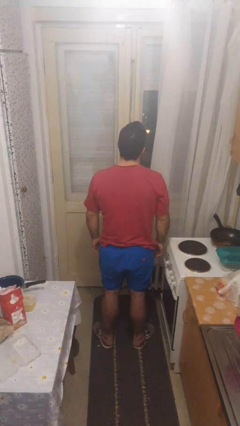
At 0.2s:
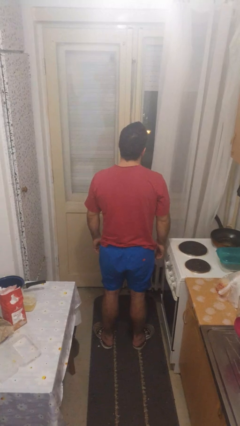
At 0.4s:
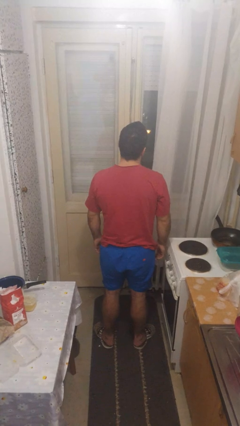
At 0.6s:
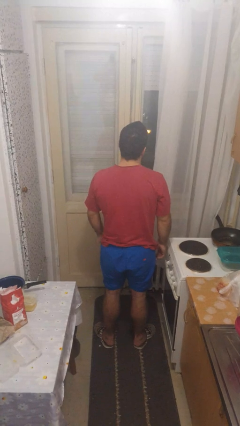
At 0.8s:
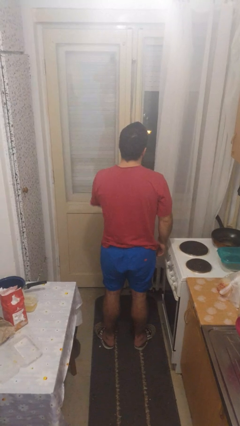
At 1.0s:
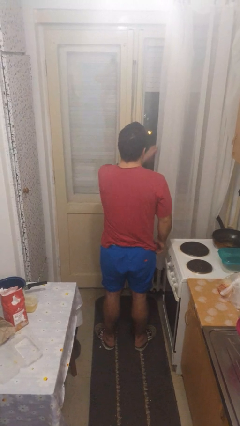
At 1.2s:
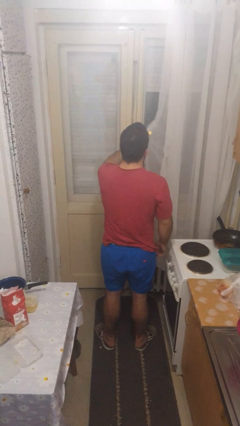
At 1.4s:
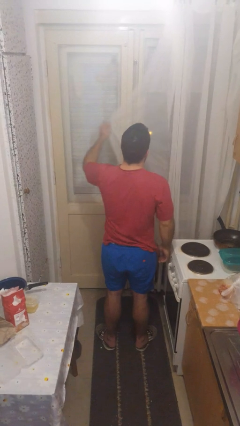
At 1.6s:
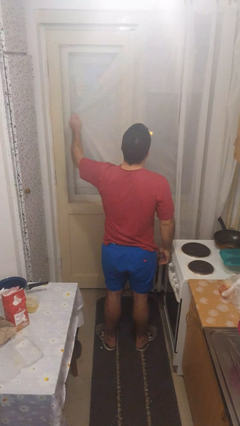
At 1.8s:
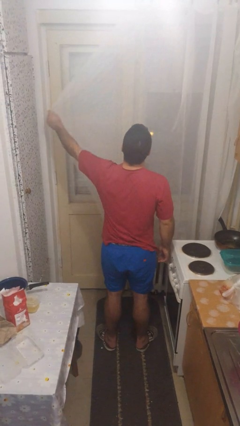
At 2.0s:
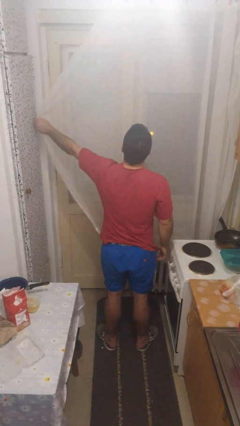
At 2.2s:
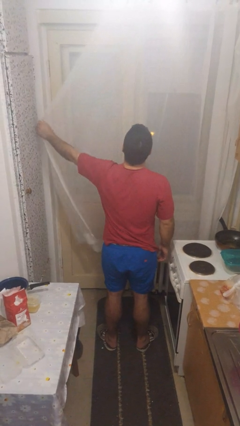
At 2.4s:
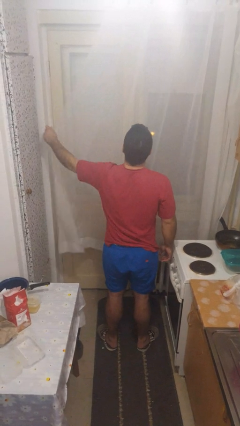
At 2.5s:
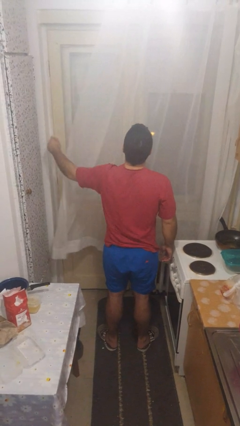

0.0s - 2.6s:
person closes curtains

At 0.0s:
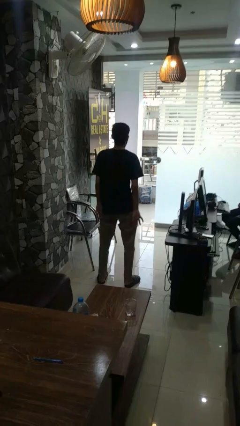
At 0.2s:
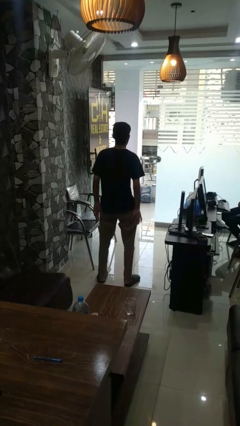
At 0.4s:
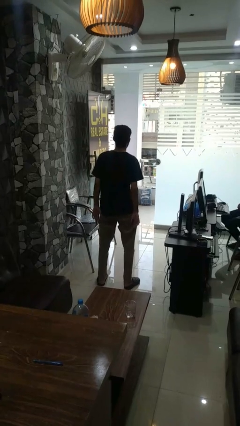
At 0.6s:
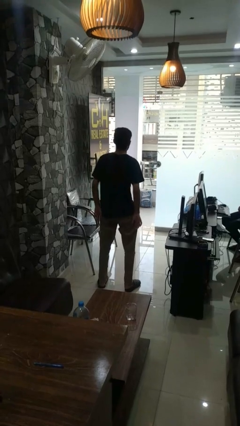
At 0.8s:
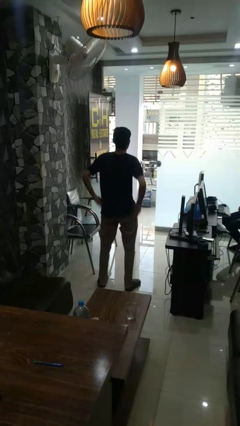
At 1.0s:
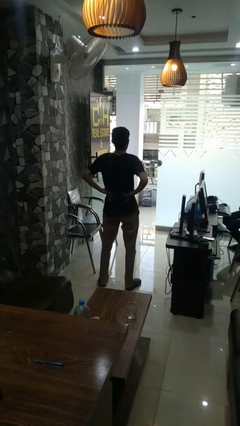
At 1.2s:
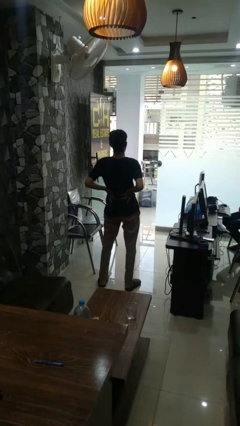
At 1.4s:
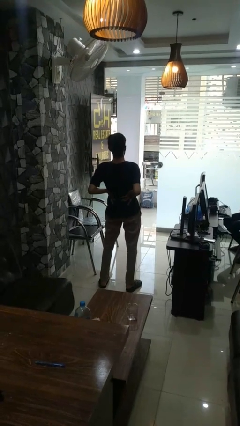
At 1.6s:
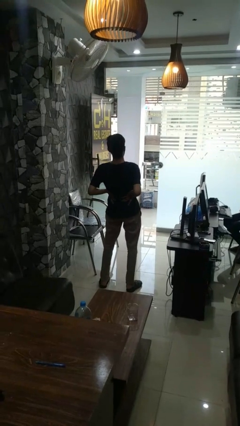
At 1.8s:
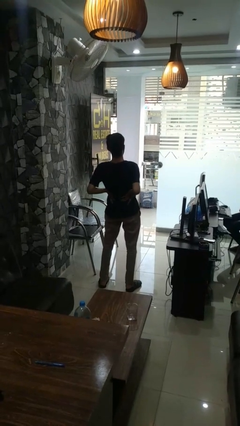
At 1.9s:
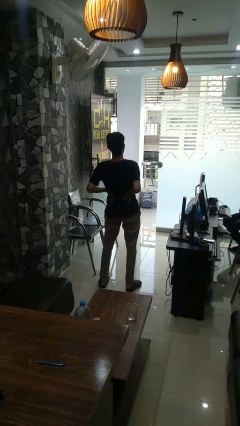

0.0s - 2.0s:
person stretches back

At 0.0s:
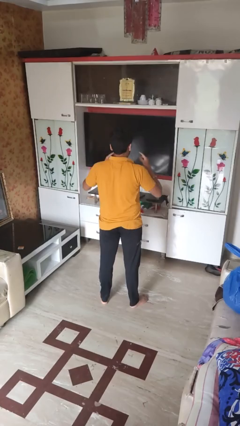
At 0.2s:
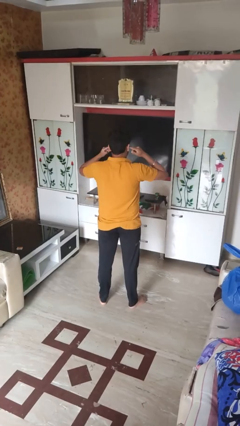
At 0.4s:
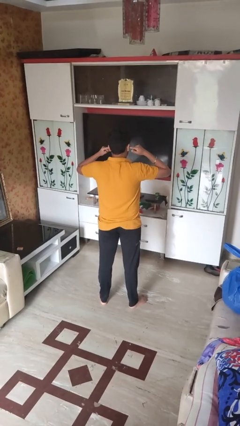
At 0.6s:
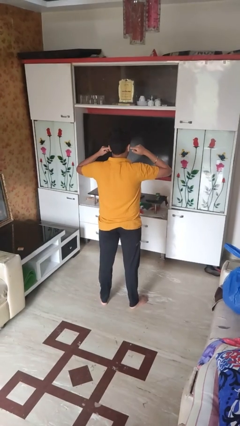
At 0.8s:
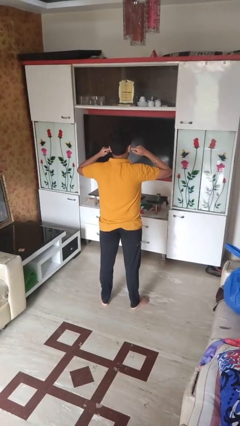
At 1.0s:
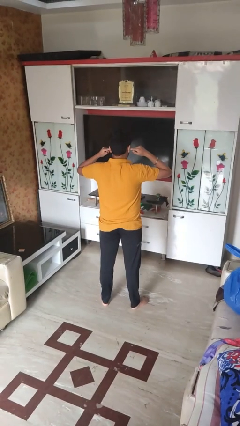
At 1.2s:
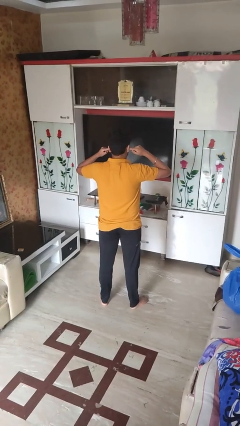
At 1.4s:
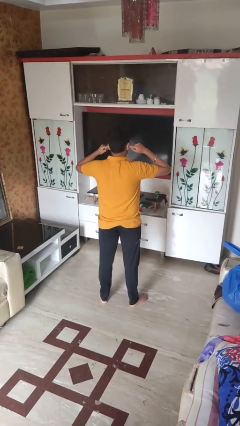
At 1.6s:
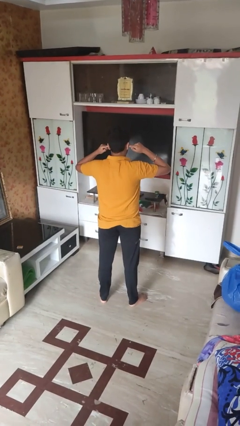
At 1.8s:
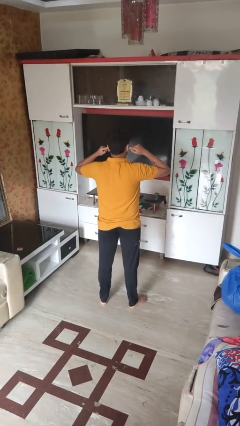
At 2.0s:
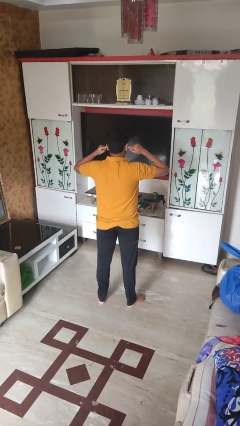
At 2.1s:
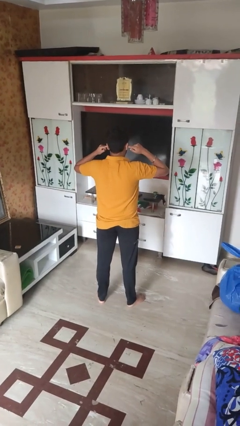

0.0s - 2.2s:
person puts fingers in ear

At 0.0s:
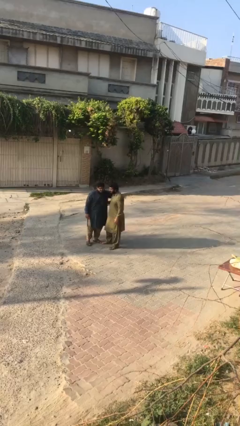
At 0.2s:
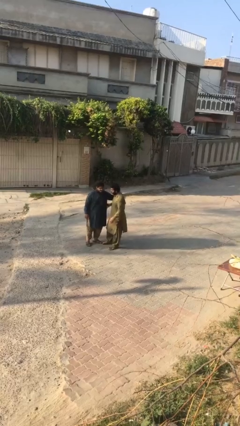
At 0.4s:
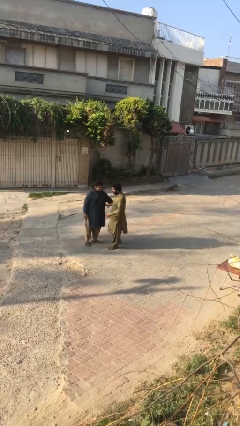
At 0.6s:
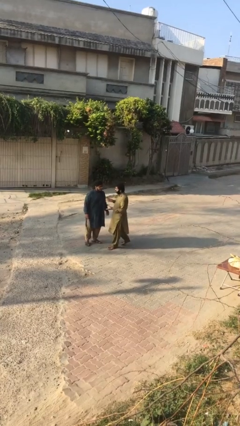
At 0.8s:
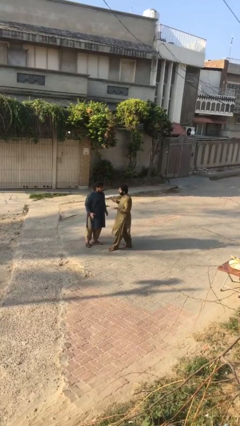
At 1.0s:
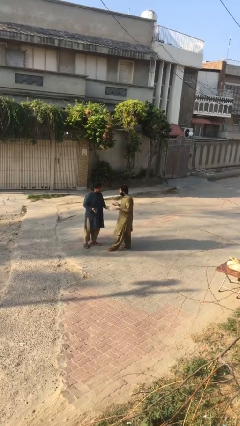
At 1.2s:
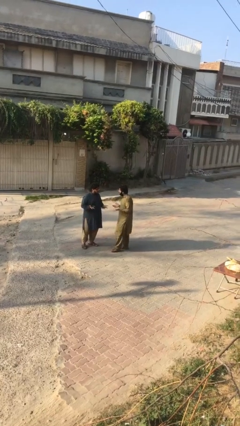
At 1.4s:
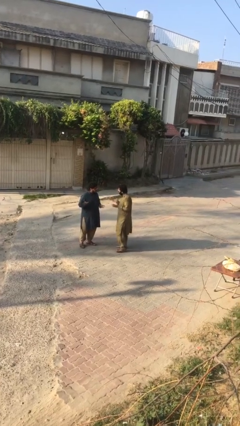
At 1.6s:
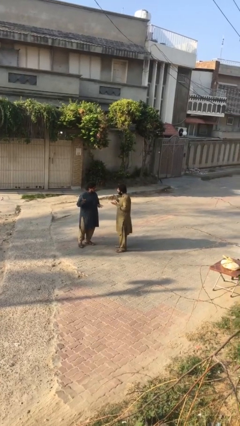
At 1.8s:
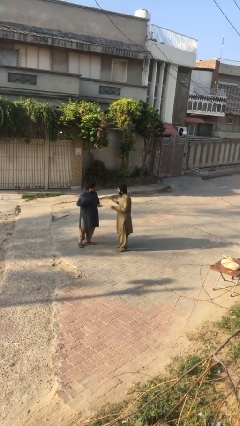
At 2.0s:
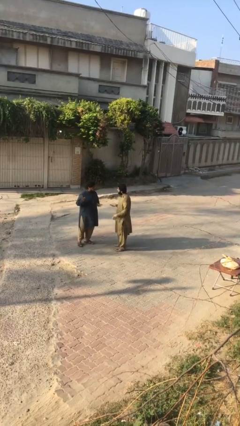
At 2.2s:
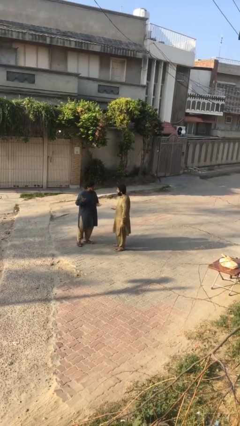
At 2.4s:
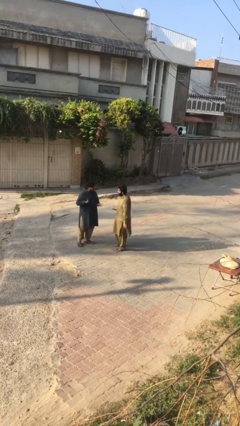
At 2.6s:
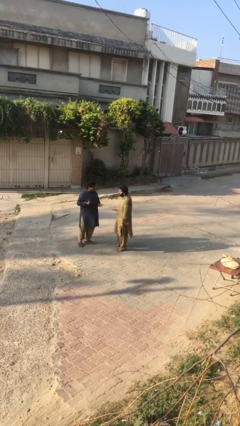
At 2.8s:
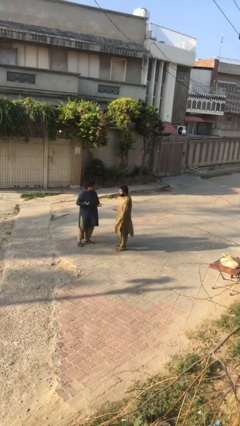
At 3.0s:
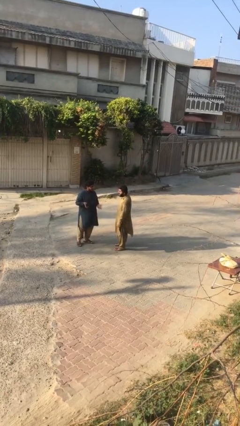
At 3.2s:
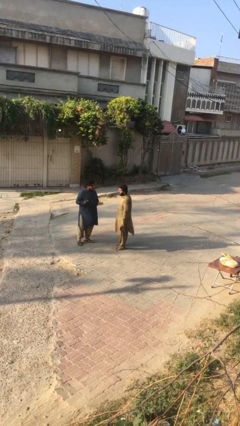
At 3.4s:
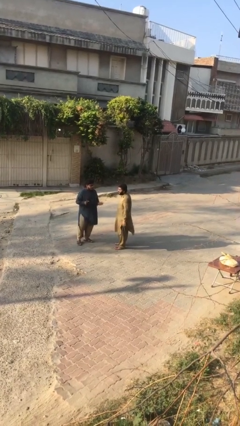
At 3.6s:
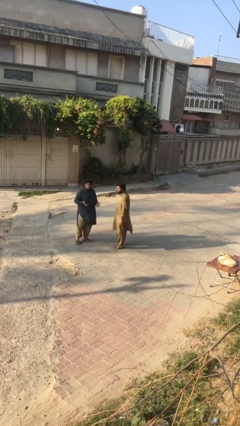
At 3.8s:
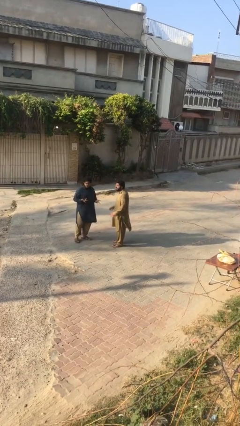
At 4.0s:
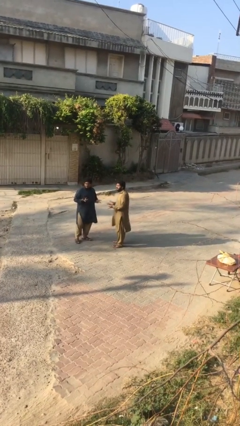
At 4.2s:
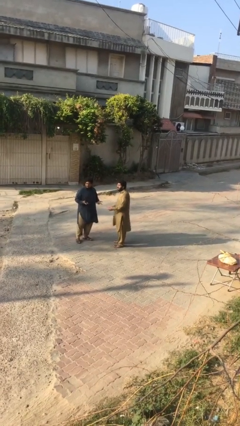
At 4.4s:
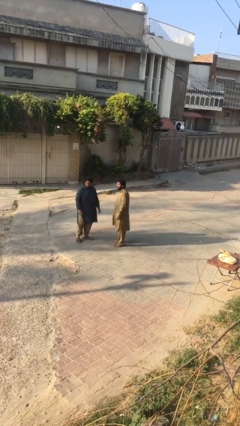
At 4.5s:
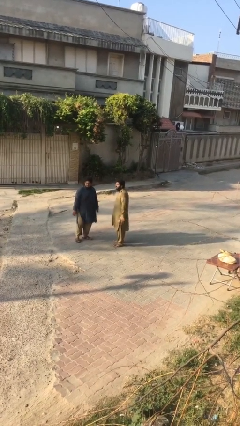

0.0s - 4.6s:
person talks to person

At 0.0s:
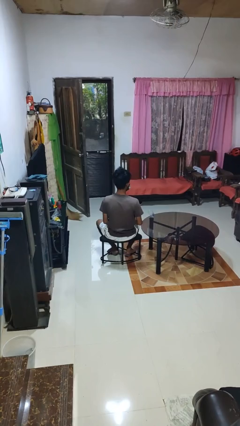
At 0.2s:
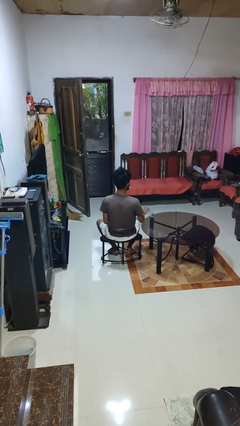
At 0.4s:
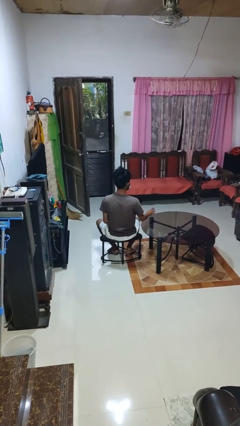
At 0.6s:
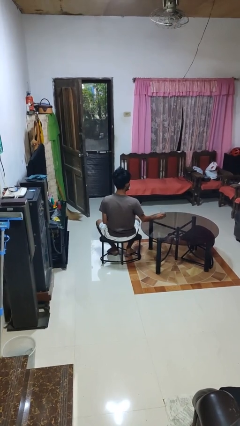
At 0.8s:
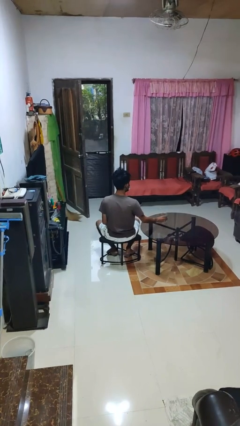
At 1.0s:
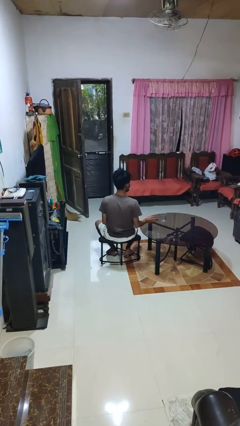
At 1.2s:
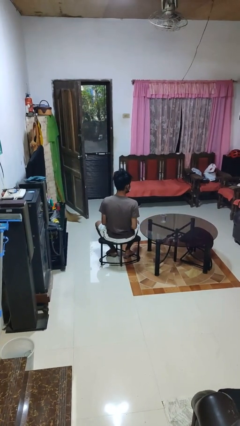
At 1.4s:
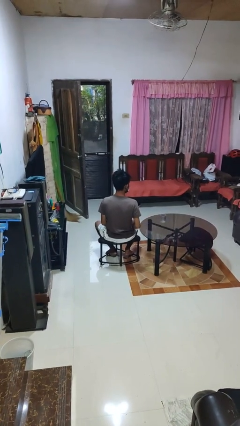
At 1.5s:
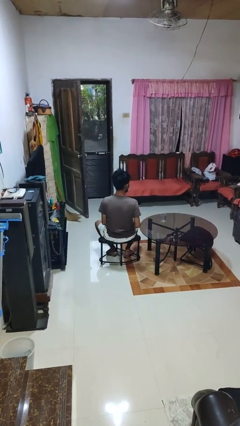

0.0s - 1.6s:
person sets upright glass

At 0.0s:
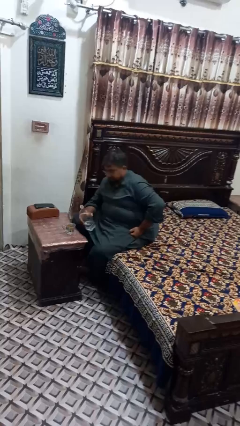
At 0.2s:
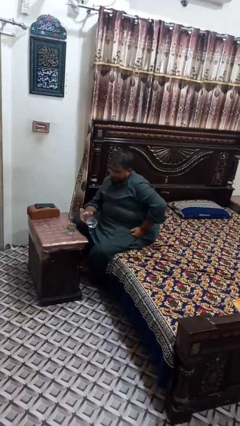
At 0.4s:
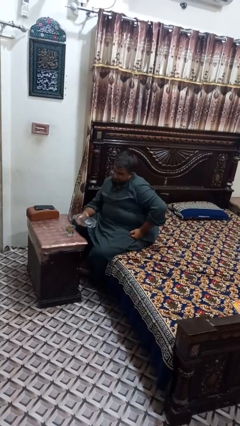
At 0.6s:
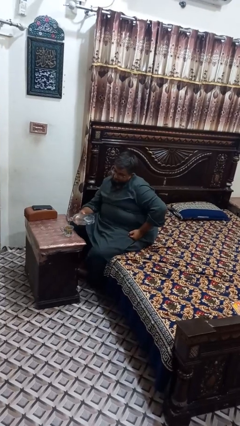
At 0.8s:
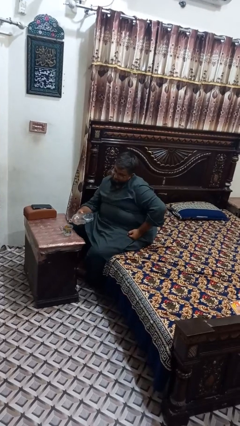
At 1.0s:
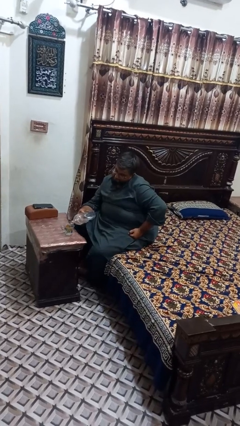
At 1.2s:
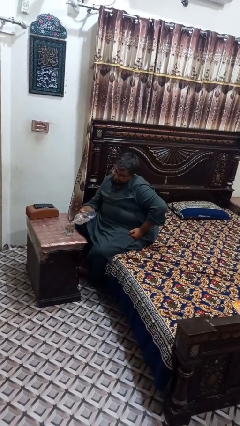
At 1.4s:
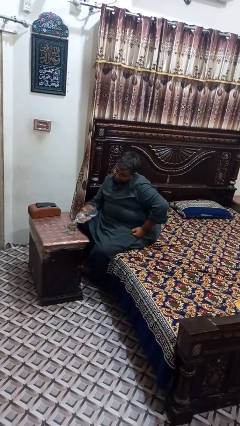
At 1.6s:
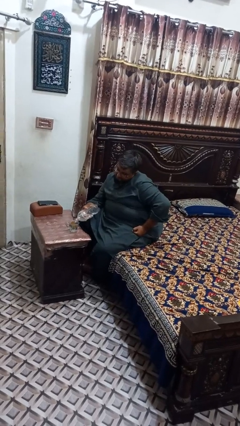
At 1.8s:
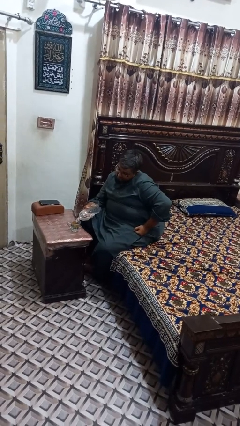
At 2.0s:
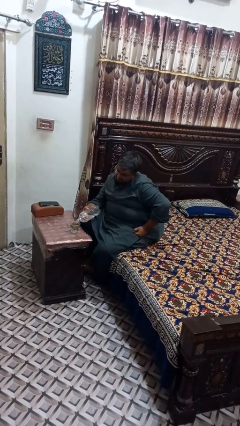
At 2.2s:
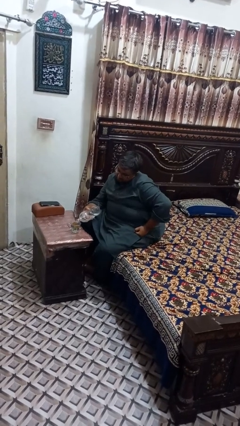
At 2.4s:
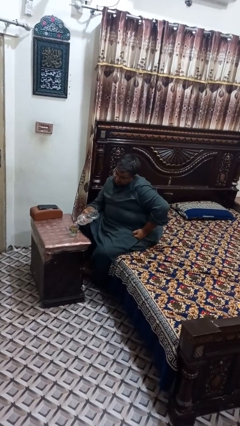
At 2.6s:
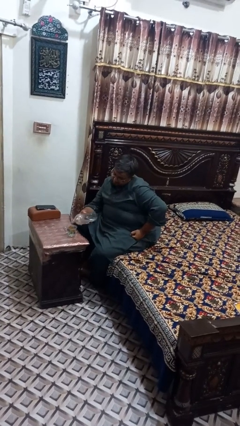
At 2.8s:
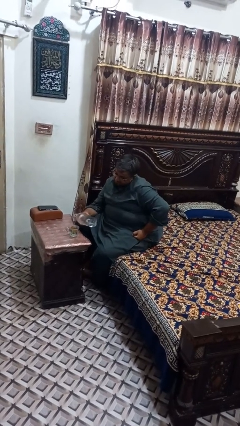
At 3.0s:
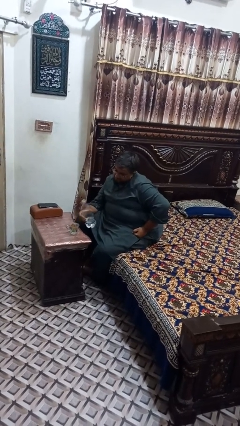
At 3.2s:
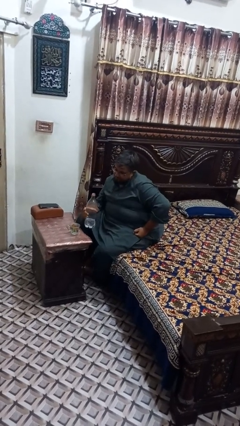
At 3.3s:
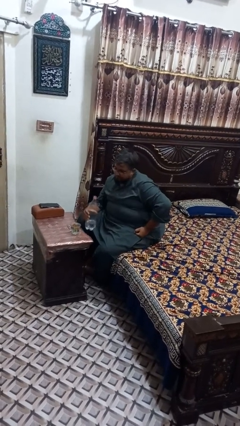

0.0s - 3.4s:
person pours liquid into cup

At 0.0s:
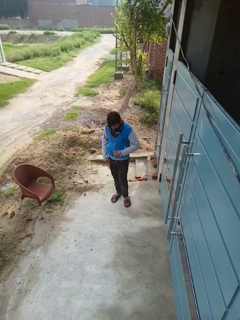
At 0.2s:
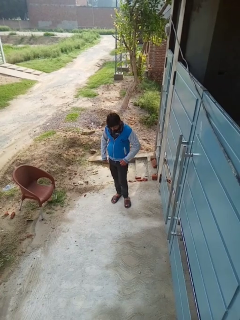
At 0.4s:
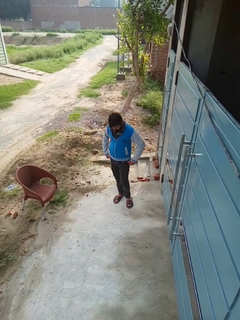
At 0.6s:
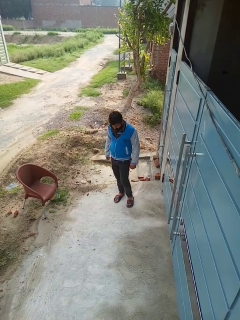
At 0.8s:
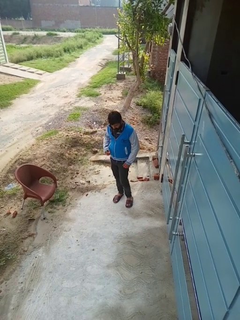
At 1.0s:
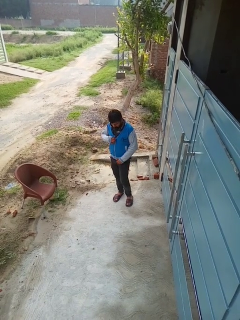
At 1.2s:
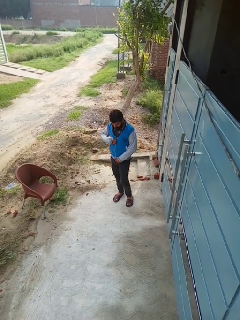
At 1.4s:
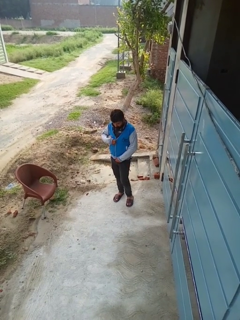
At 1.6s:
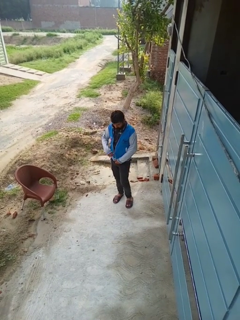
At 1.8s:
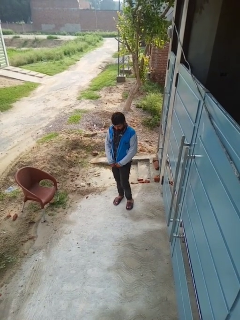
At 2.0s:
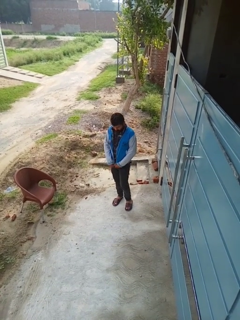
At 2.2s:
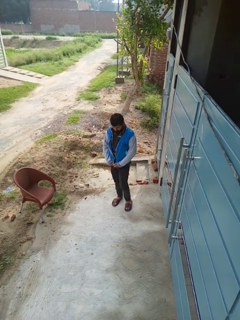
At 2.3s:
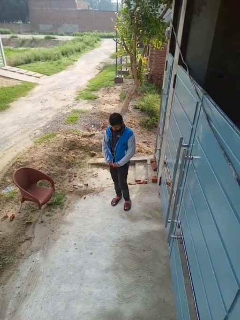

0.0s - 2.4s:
person unzips jacket
